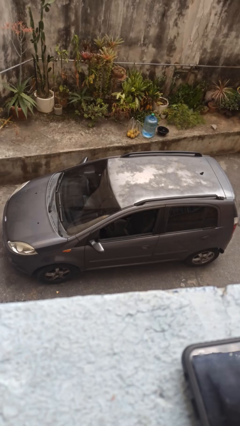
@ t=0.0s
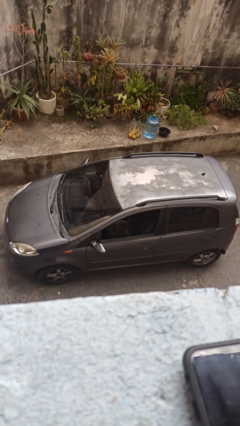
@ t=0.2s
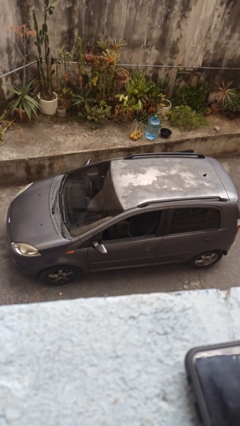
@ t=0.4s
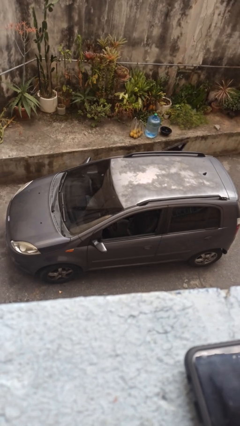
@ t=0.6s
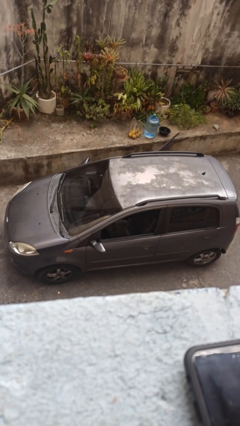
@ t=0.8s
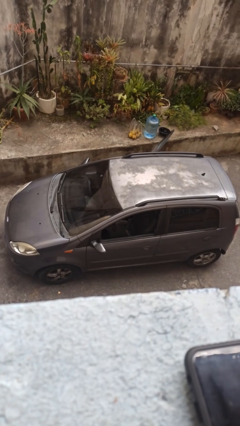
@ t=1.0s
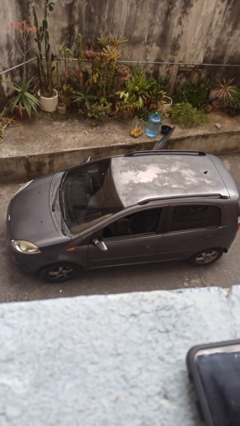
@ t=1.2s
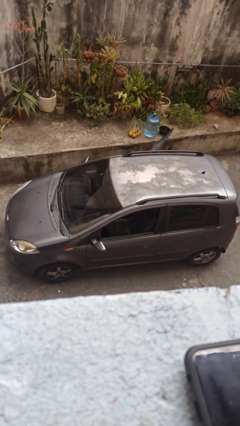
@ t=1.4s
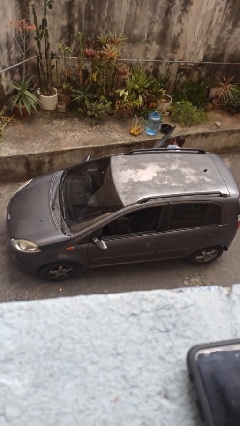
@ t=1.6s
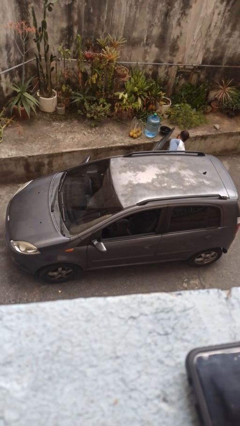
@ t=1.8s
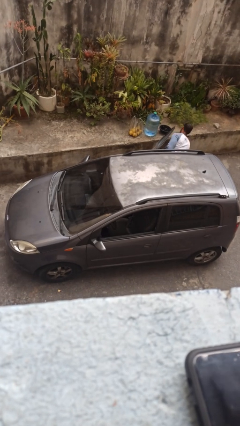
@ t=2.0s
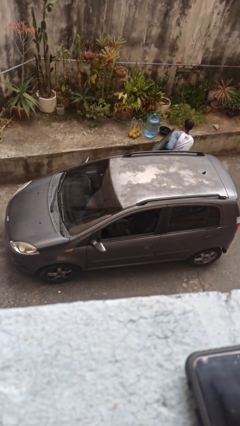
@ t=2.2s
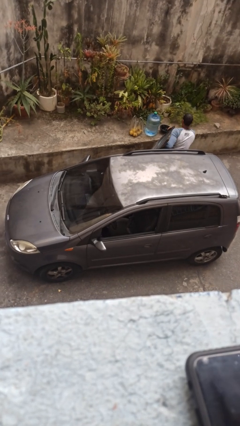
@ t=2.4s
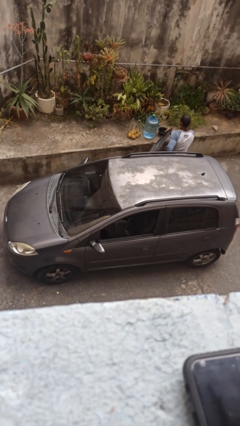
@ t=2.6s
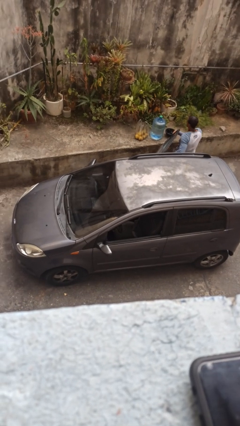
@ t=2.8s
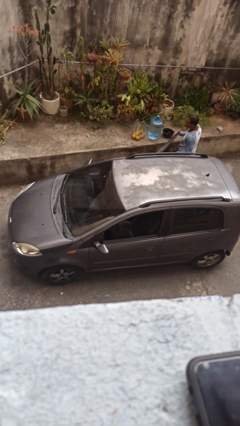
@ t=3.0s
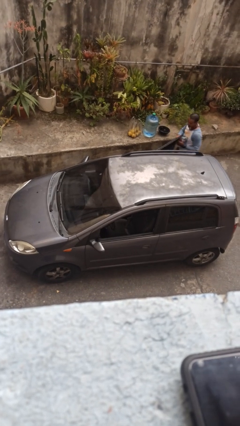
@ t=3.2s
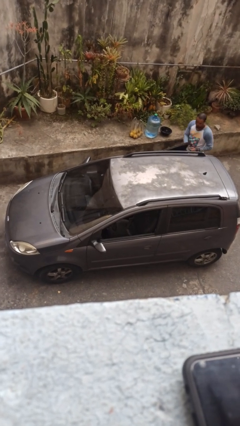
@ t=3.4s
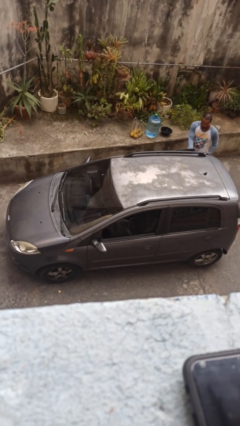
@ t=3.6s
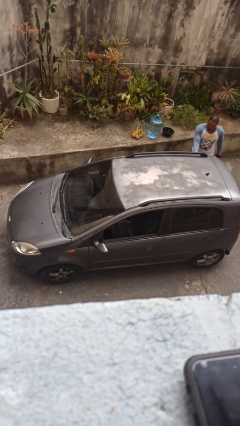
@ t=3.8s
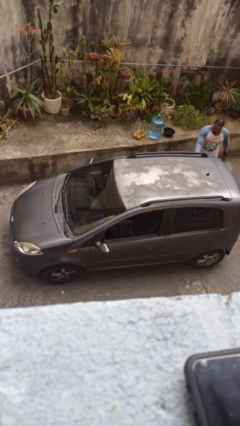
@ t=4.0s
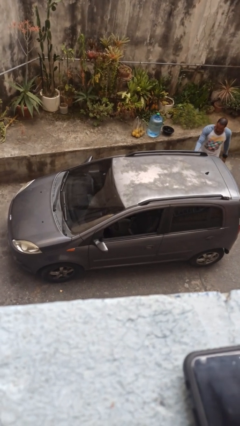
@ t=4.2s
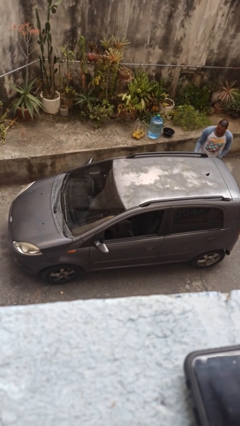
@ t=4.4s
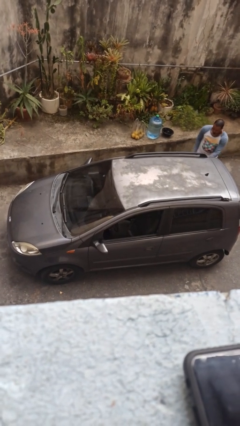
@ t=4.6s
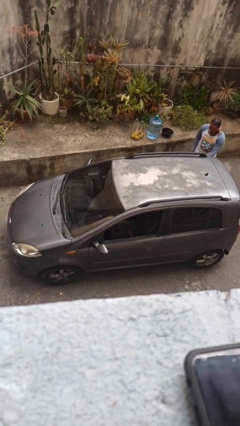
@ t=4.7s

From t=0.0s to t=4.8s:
car drops off person

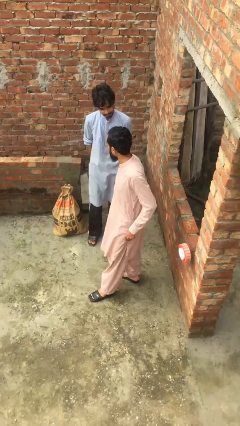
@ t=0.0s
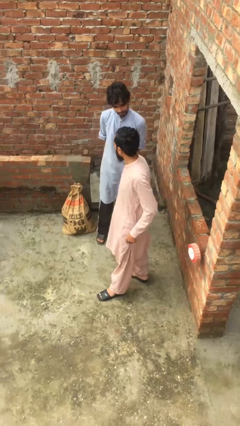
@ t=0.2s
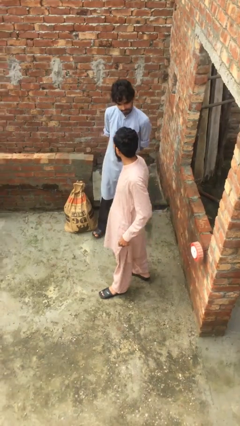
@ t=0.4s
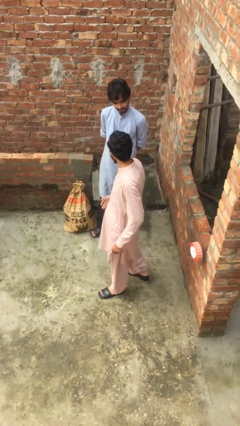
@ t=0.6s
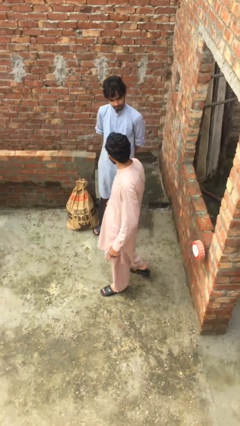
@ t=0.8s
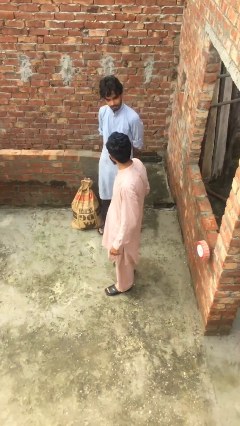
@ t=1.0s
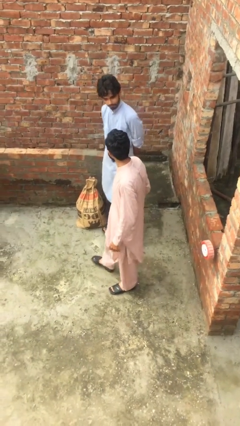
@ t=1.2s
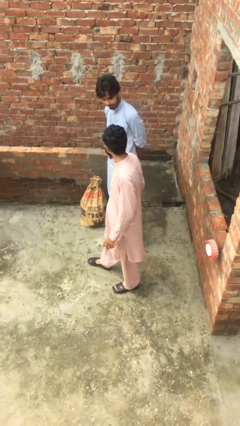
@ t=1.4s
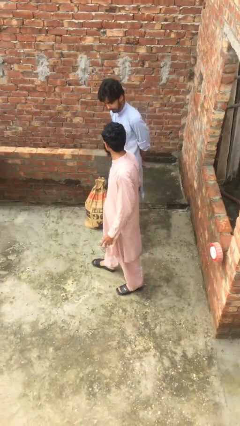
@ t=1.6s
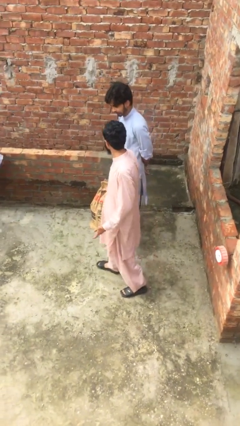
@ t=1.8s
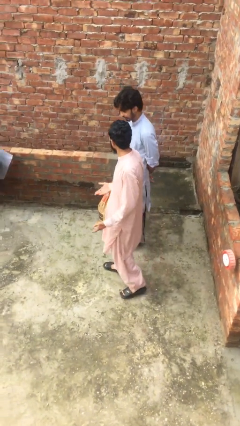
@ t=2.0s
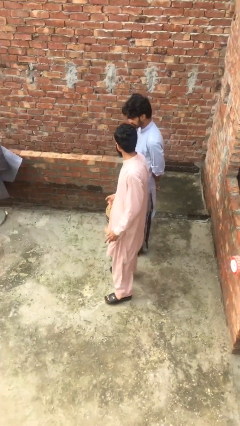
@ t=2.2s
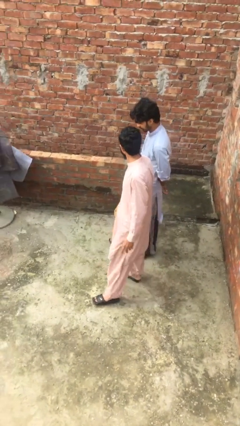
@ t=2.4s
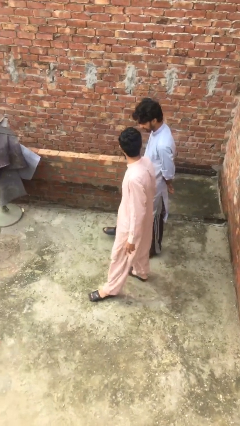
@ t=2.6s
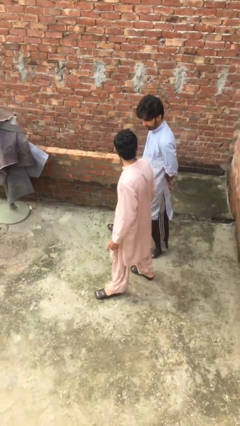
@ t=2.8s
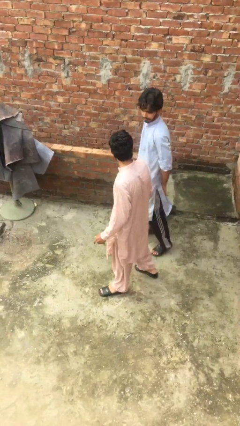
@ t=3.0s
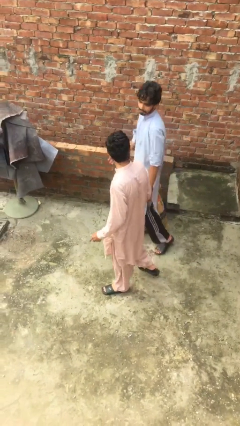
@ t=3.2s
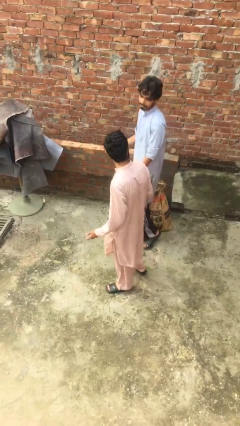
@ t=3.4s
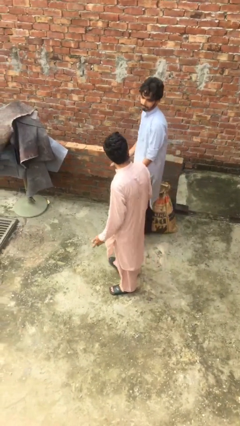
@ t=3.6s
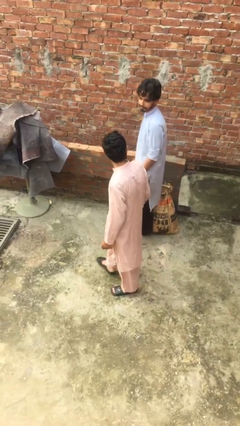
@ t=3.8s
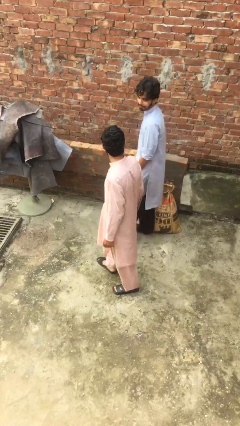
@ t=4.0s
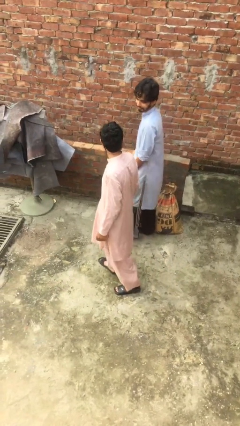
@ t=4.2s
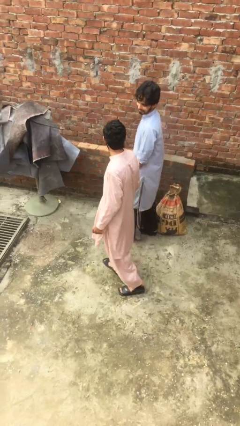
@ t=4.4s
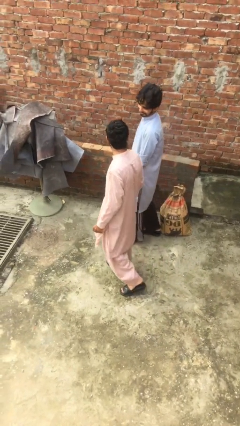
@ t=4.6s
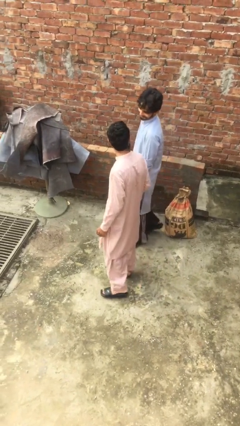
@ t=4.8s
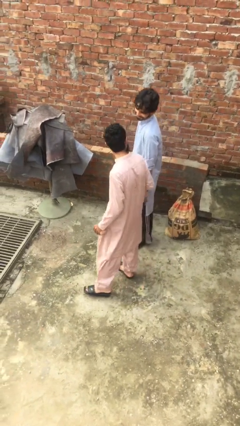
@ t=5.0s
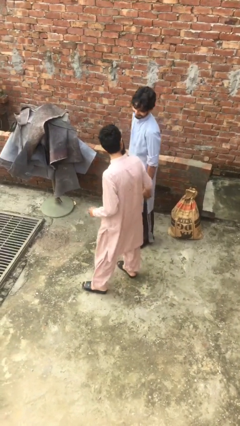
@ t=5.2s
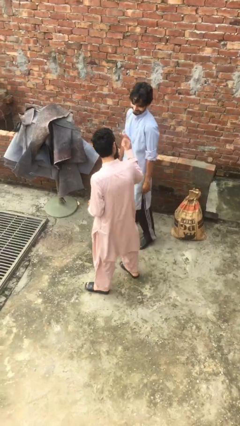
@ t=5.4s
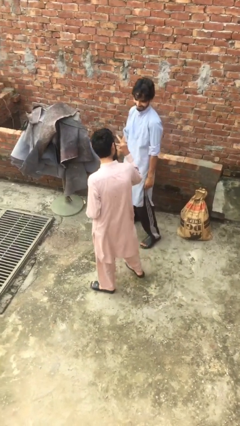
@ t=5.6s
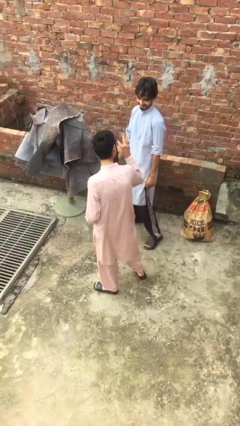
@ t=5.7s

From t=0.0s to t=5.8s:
person talks to person

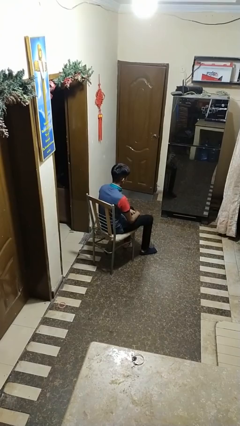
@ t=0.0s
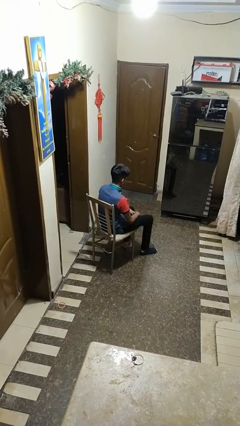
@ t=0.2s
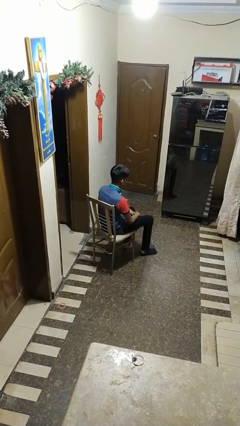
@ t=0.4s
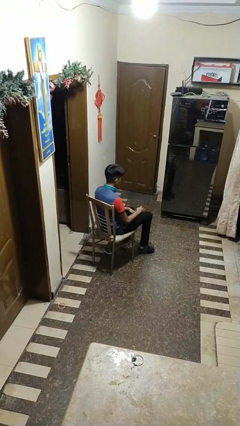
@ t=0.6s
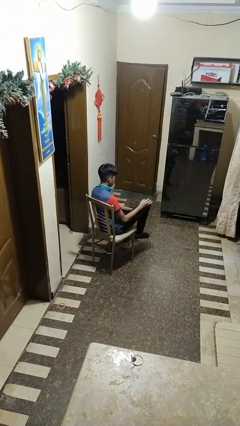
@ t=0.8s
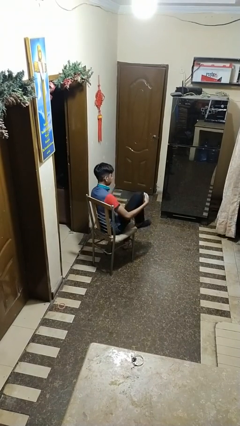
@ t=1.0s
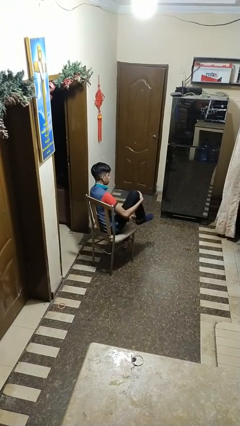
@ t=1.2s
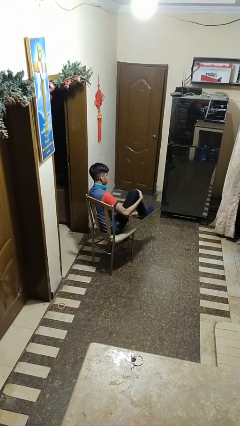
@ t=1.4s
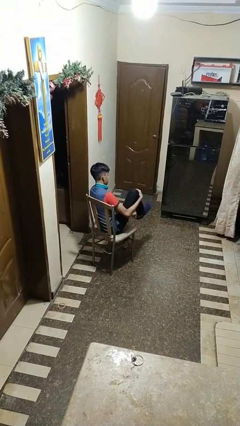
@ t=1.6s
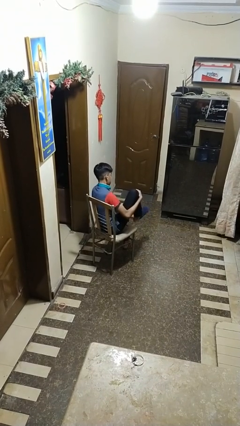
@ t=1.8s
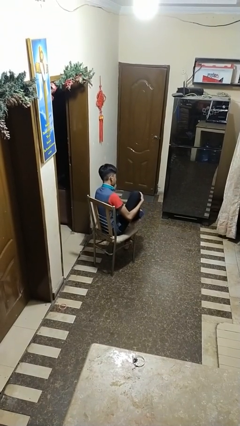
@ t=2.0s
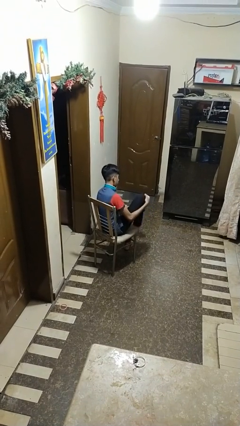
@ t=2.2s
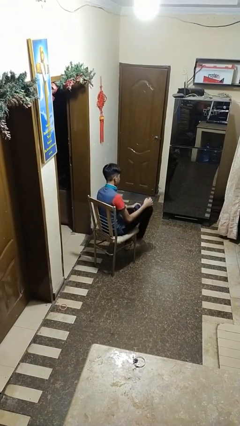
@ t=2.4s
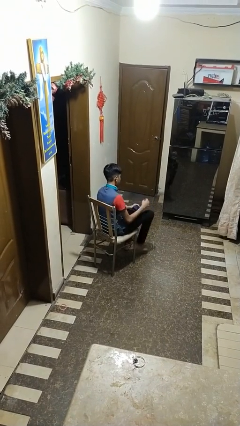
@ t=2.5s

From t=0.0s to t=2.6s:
person takes off socks

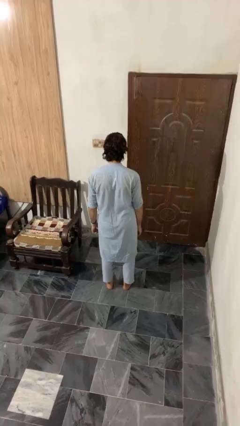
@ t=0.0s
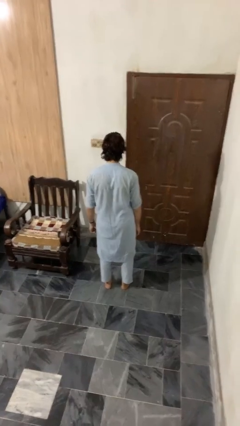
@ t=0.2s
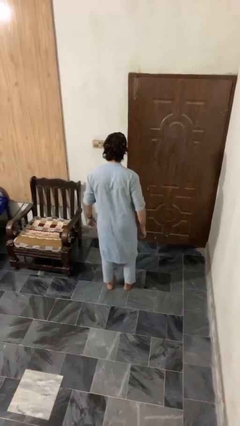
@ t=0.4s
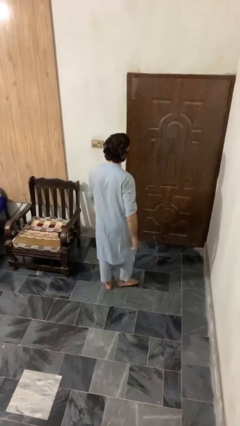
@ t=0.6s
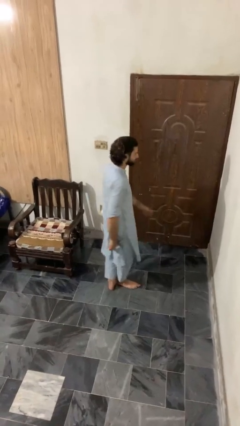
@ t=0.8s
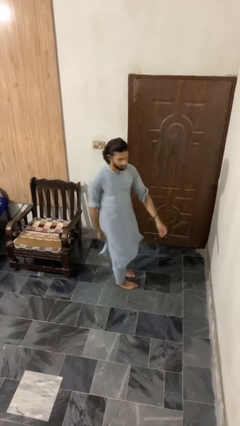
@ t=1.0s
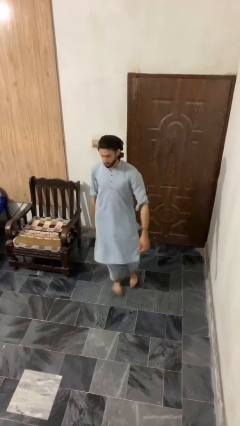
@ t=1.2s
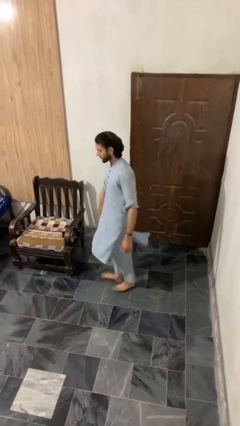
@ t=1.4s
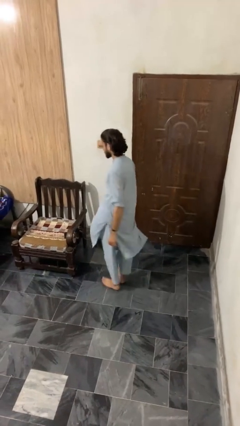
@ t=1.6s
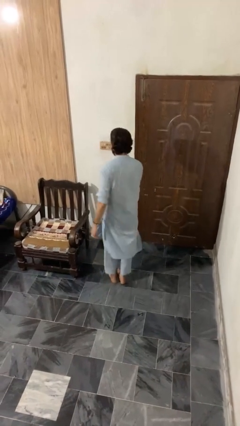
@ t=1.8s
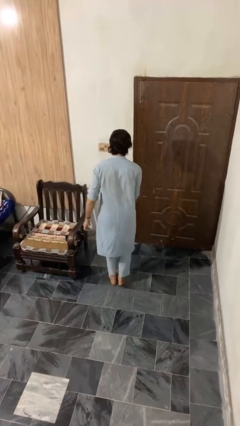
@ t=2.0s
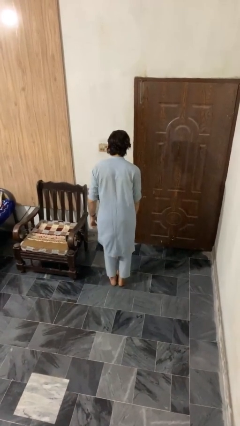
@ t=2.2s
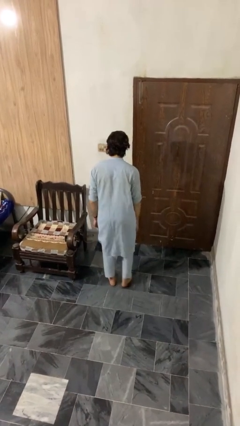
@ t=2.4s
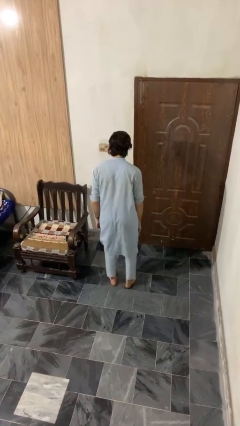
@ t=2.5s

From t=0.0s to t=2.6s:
person twirls

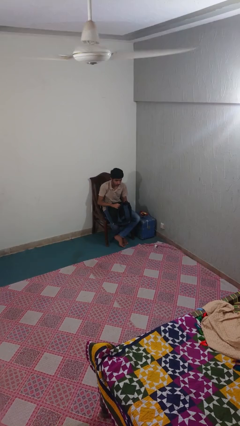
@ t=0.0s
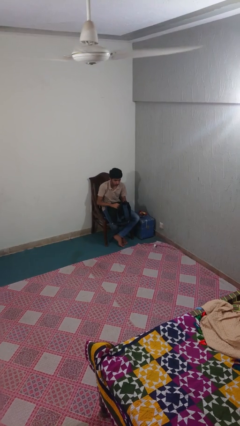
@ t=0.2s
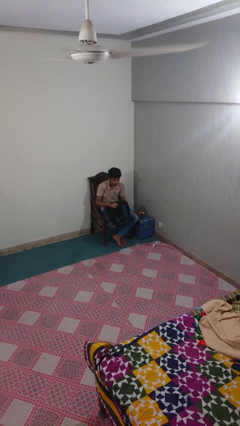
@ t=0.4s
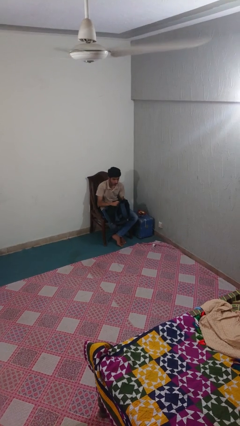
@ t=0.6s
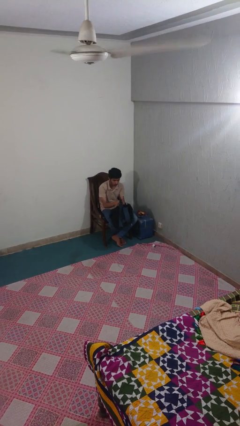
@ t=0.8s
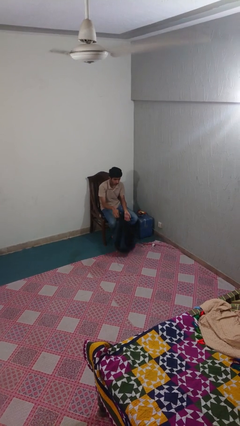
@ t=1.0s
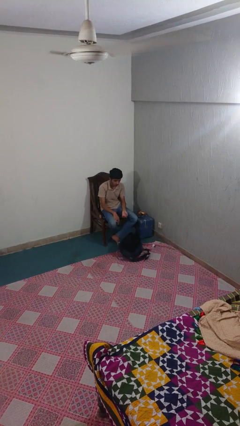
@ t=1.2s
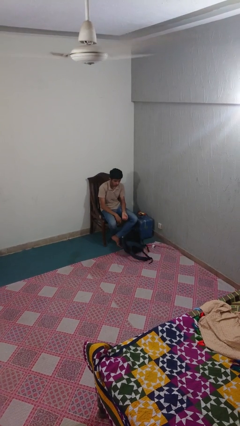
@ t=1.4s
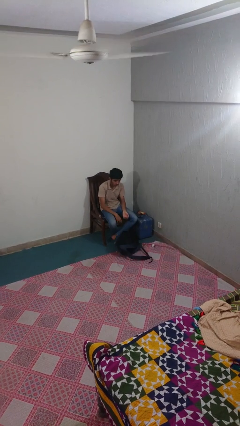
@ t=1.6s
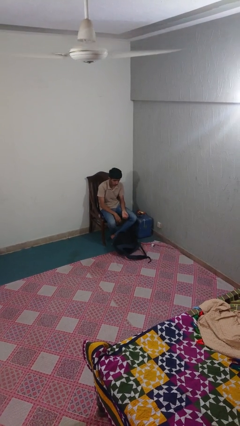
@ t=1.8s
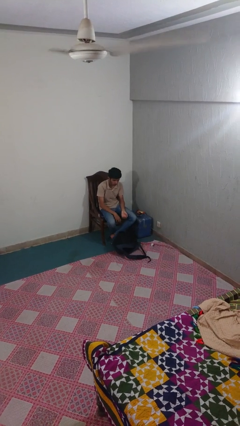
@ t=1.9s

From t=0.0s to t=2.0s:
person drops object
